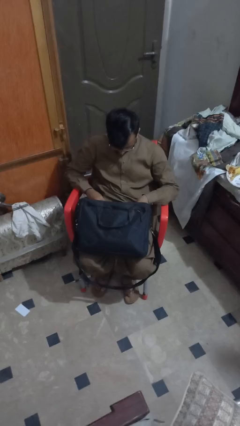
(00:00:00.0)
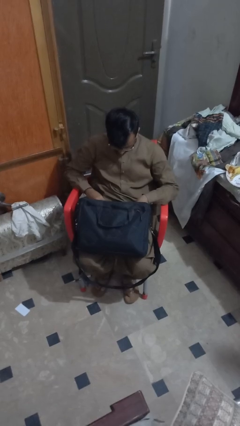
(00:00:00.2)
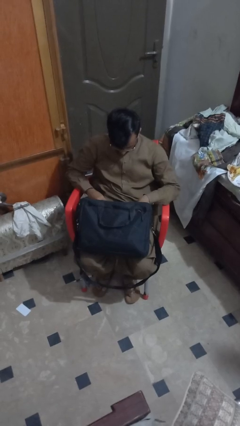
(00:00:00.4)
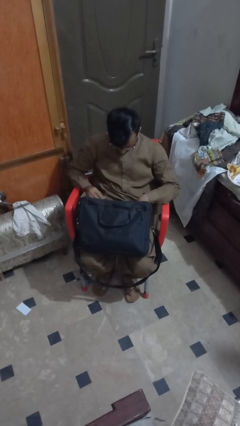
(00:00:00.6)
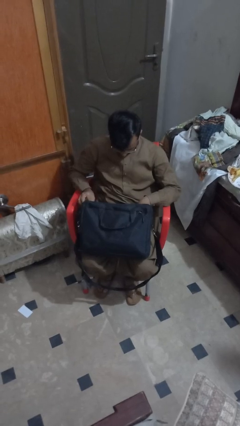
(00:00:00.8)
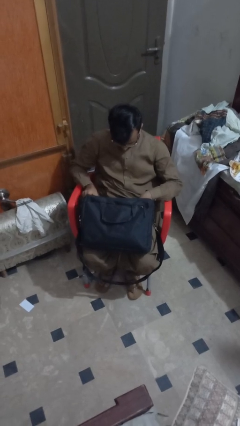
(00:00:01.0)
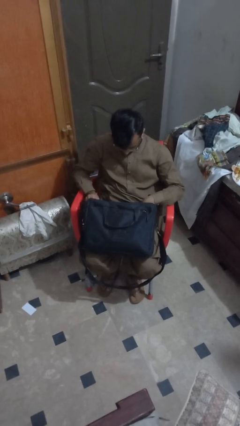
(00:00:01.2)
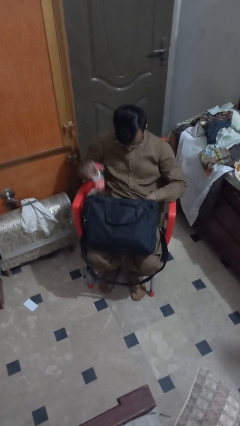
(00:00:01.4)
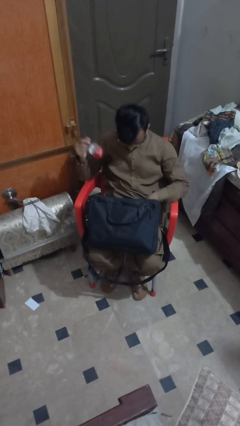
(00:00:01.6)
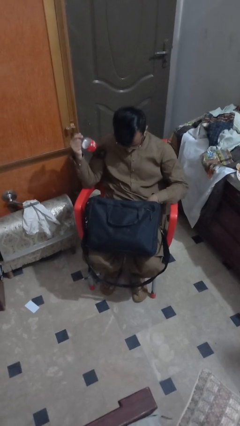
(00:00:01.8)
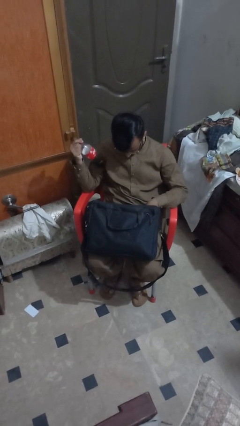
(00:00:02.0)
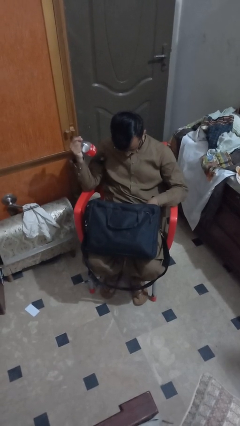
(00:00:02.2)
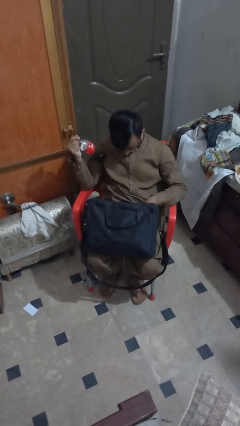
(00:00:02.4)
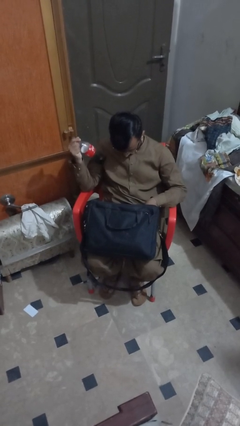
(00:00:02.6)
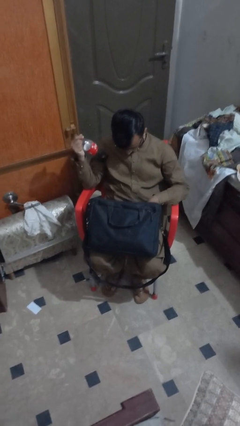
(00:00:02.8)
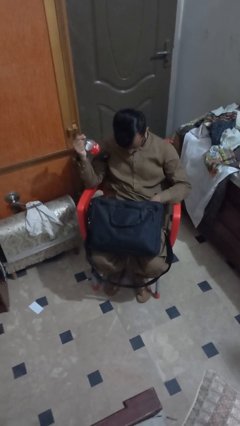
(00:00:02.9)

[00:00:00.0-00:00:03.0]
person takes object from bag

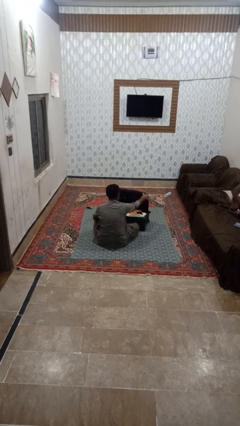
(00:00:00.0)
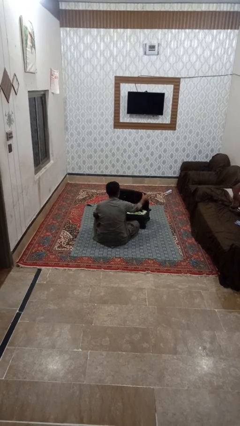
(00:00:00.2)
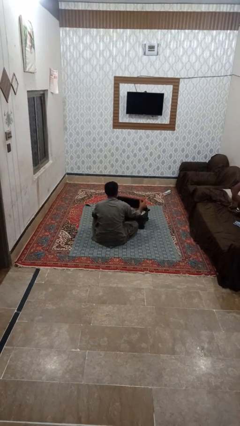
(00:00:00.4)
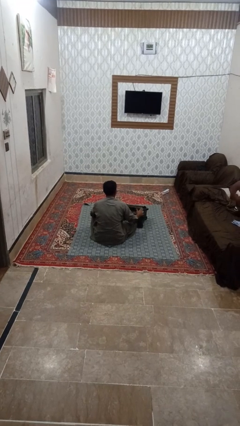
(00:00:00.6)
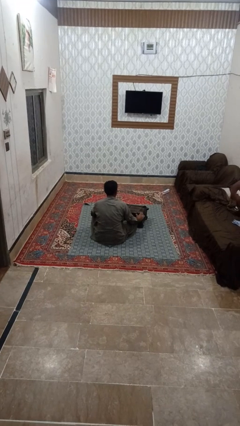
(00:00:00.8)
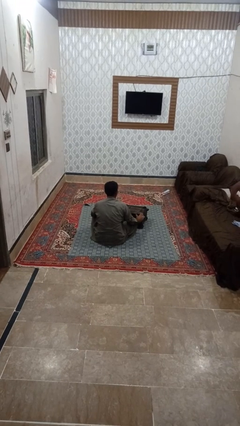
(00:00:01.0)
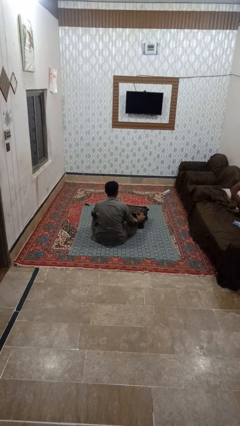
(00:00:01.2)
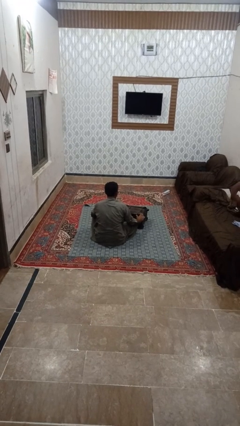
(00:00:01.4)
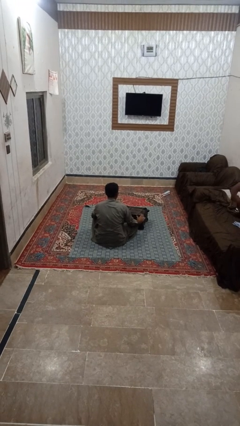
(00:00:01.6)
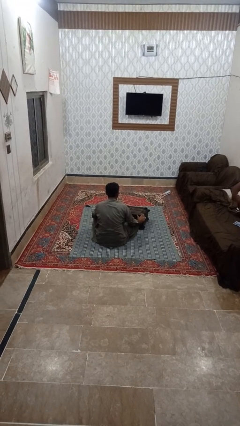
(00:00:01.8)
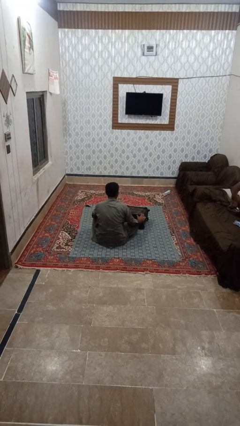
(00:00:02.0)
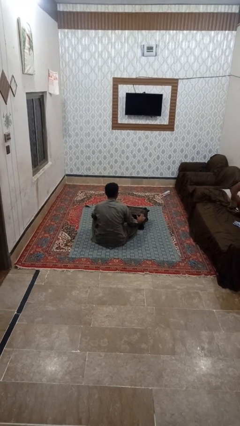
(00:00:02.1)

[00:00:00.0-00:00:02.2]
person closes suitcase

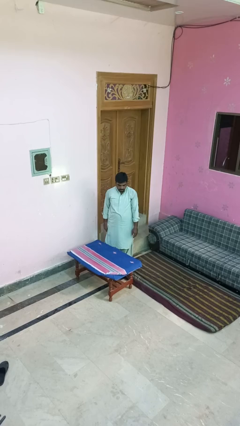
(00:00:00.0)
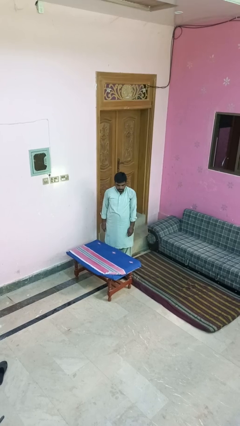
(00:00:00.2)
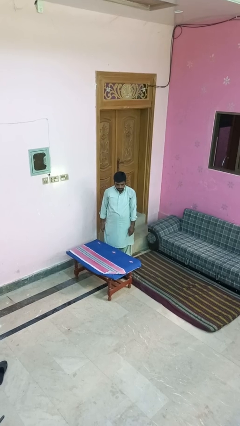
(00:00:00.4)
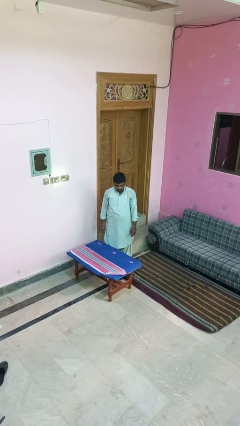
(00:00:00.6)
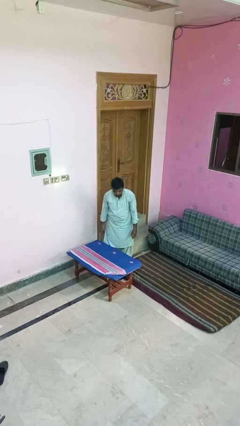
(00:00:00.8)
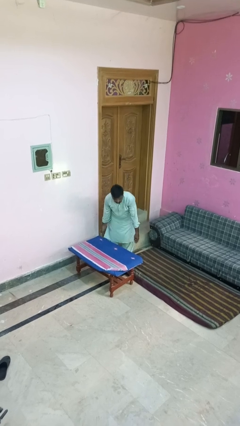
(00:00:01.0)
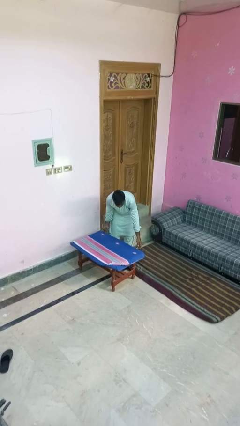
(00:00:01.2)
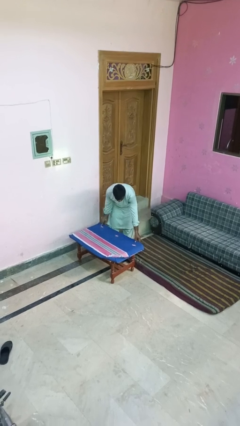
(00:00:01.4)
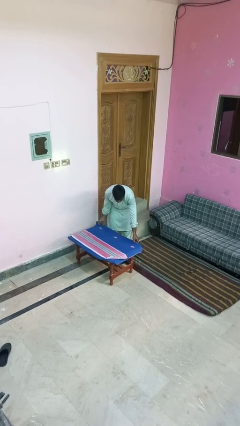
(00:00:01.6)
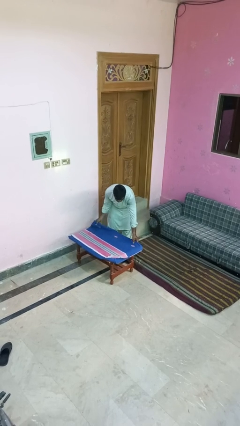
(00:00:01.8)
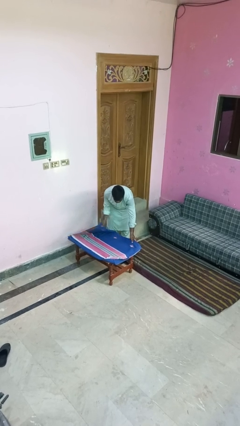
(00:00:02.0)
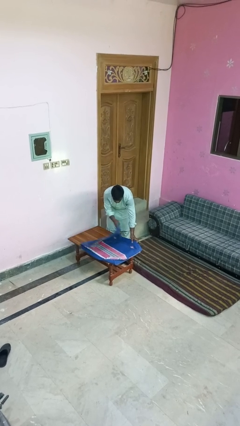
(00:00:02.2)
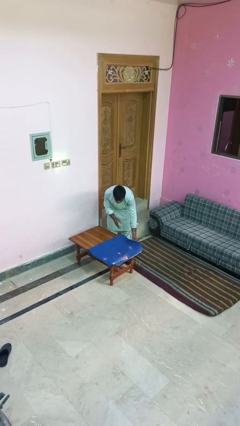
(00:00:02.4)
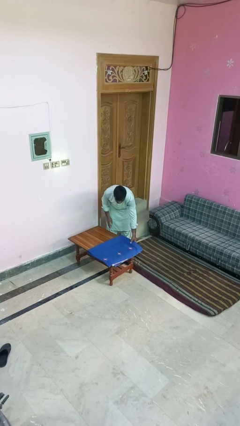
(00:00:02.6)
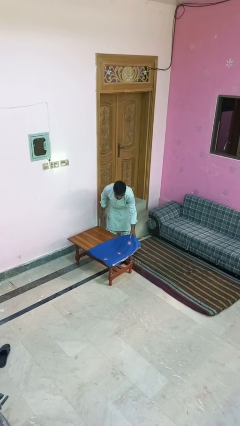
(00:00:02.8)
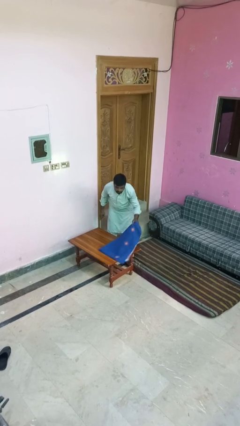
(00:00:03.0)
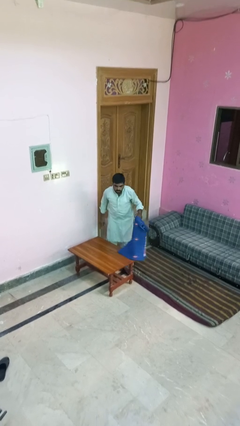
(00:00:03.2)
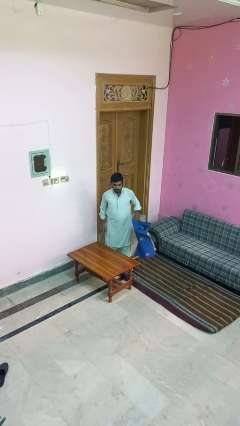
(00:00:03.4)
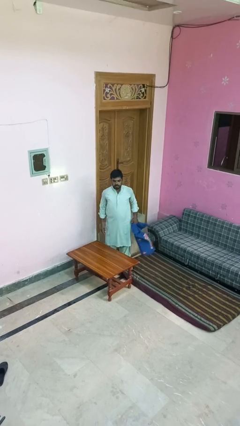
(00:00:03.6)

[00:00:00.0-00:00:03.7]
person folds tablecloth

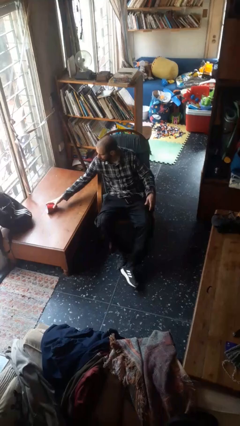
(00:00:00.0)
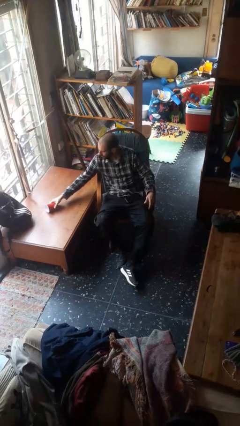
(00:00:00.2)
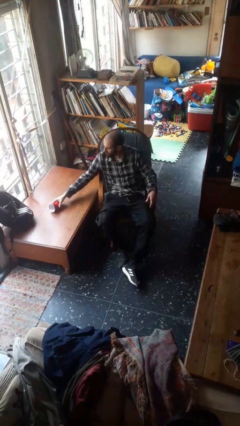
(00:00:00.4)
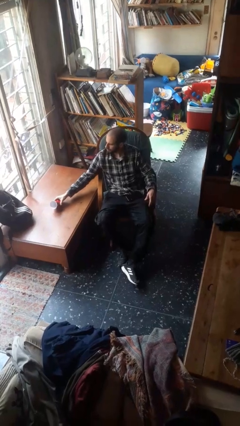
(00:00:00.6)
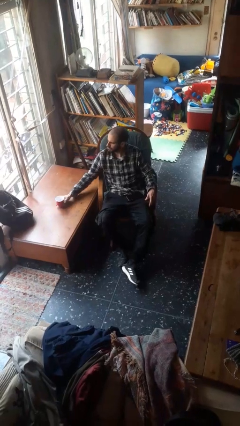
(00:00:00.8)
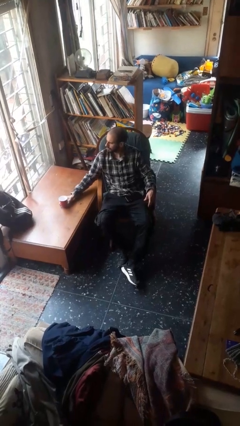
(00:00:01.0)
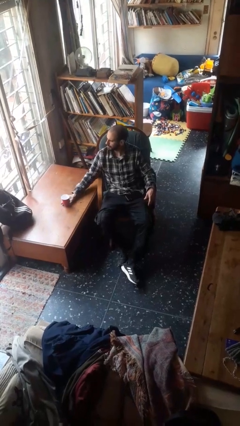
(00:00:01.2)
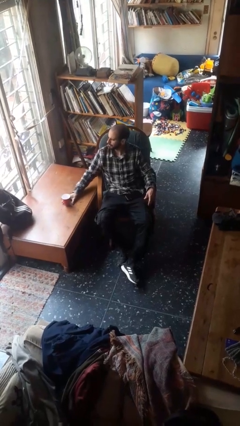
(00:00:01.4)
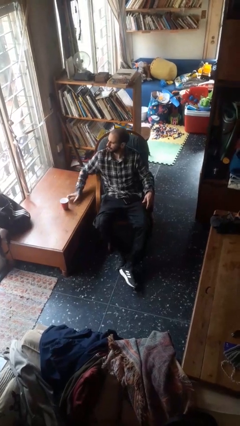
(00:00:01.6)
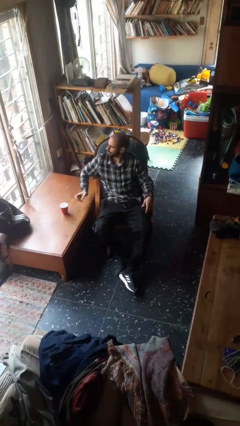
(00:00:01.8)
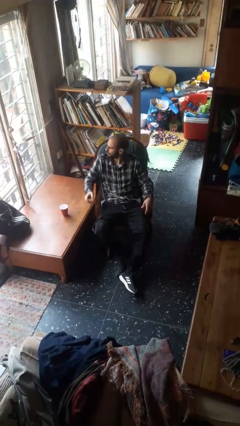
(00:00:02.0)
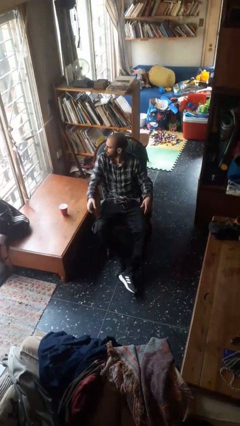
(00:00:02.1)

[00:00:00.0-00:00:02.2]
person sets upright glass

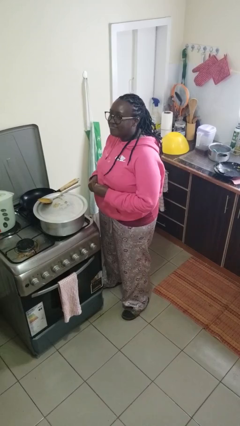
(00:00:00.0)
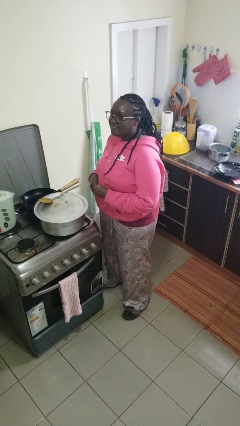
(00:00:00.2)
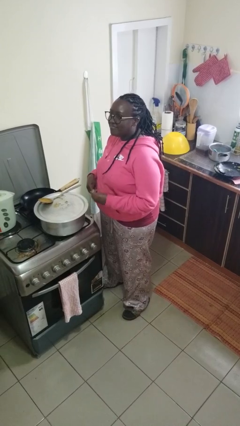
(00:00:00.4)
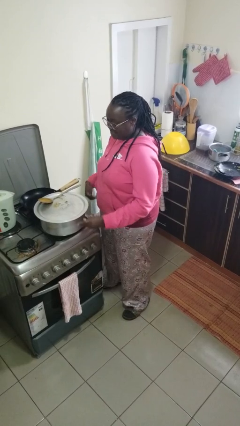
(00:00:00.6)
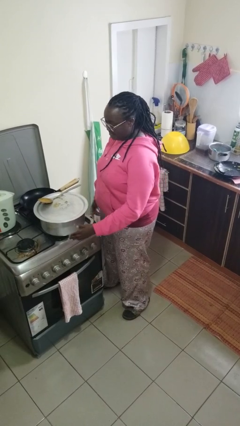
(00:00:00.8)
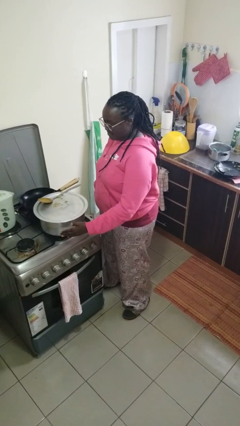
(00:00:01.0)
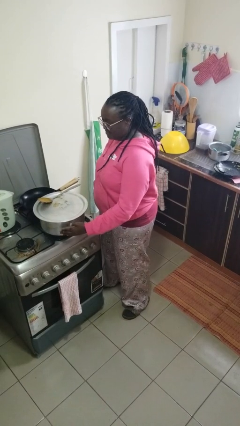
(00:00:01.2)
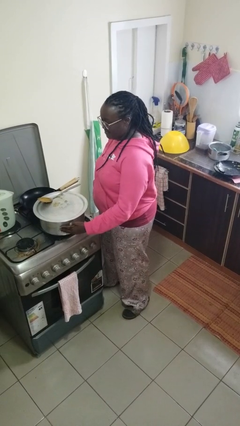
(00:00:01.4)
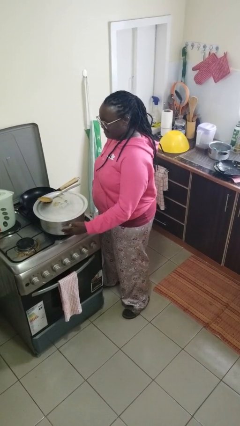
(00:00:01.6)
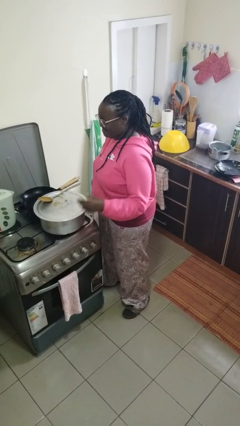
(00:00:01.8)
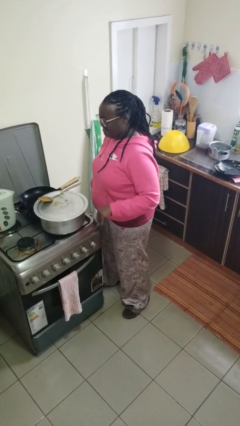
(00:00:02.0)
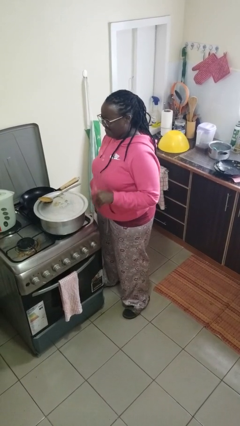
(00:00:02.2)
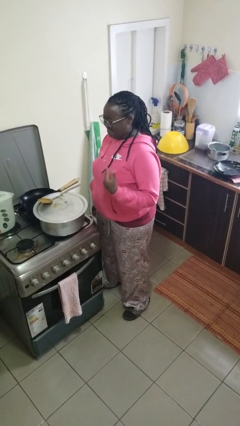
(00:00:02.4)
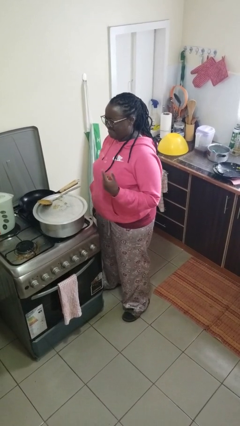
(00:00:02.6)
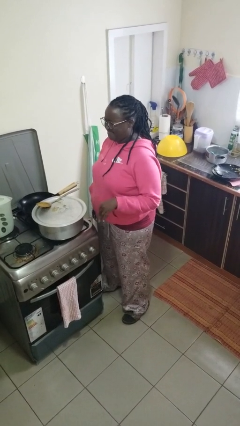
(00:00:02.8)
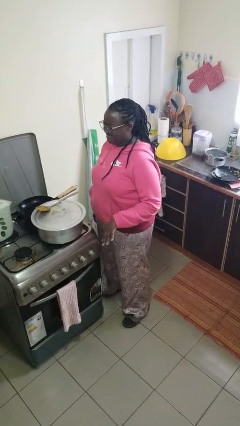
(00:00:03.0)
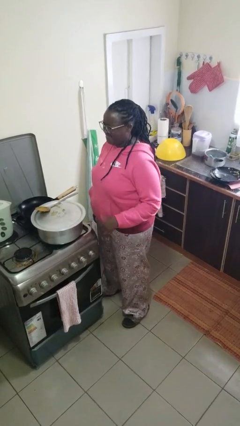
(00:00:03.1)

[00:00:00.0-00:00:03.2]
person burns hand

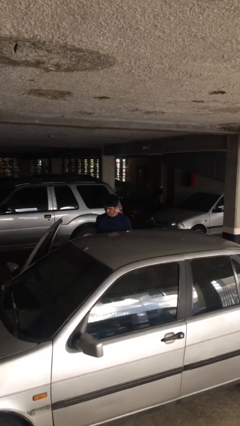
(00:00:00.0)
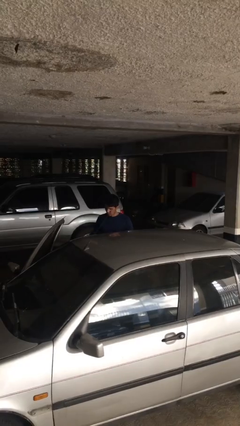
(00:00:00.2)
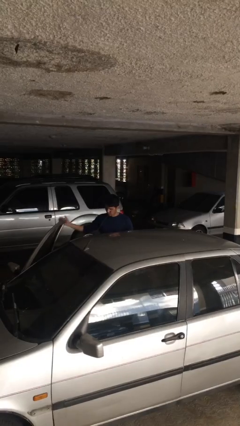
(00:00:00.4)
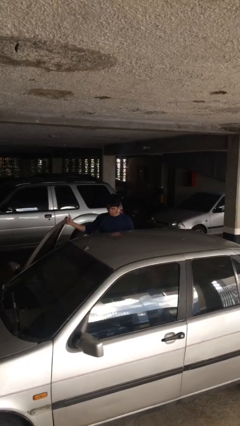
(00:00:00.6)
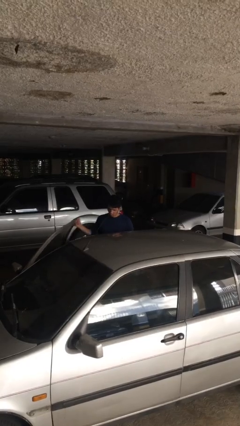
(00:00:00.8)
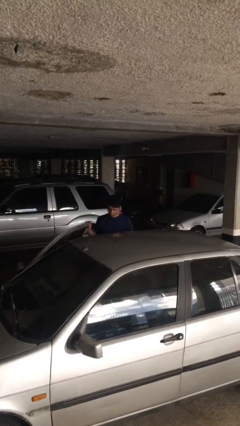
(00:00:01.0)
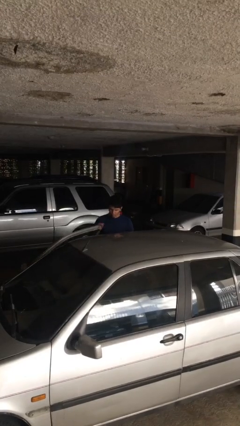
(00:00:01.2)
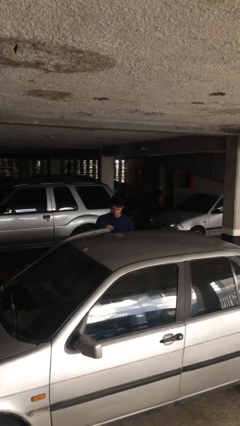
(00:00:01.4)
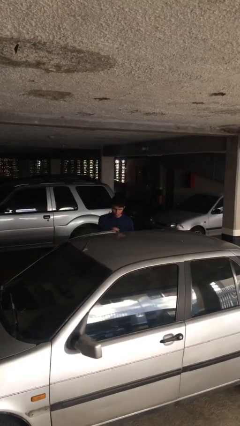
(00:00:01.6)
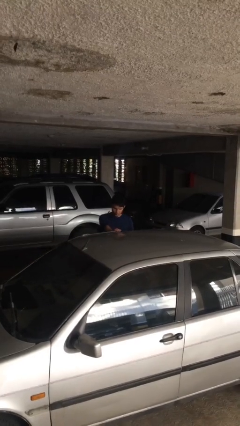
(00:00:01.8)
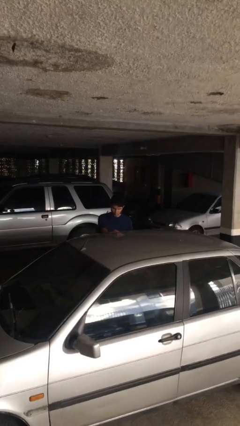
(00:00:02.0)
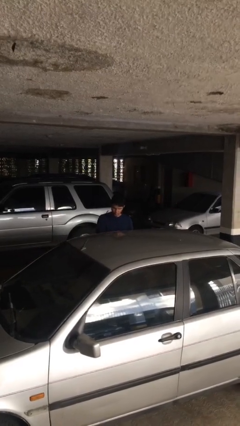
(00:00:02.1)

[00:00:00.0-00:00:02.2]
person closes car door

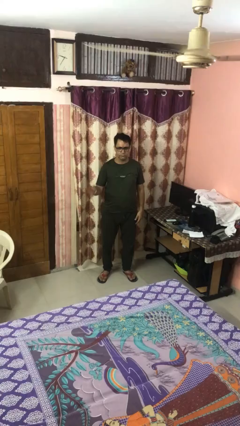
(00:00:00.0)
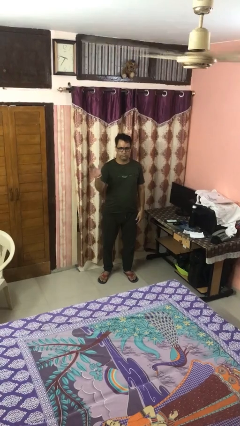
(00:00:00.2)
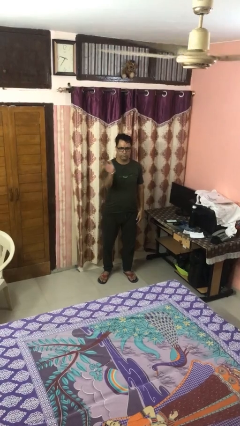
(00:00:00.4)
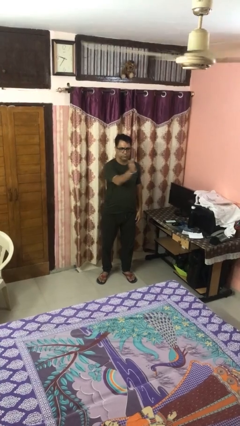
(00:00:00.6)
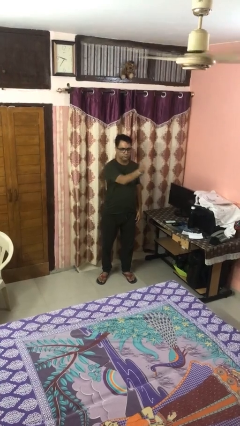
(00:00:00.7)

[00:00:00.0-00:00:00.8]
person gestures swipe left
